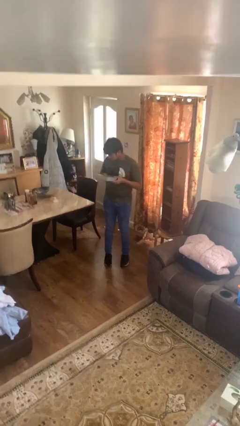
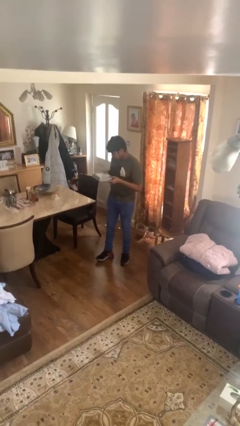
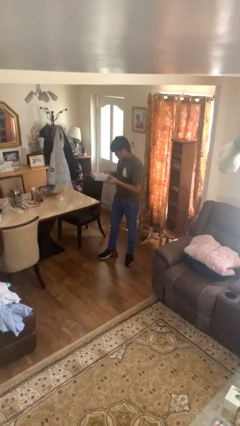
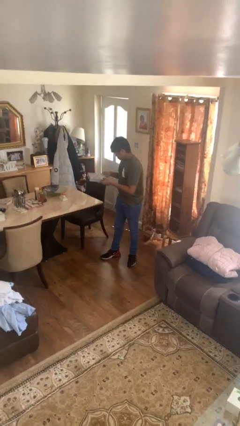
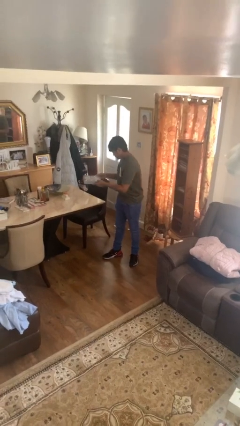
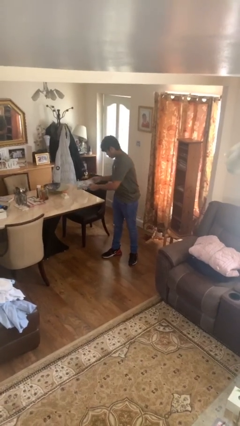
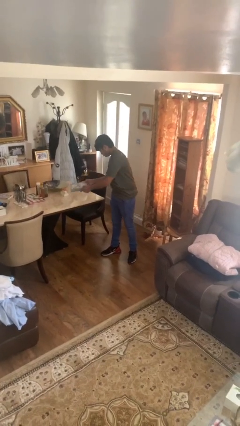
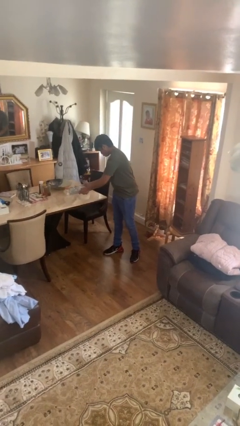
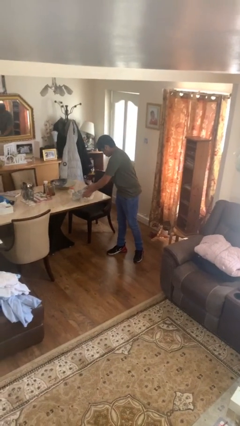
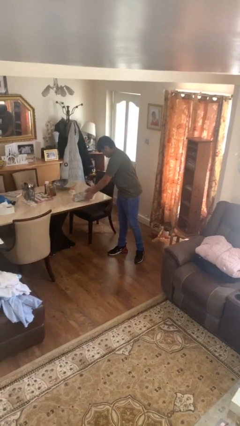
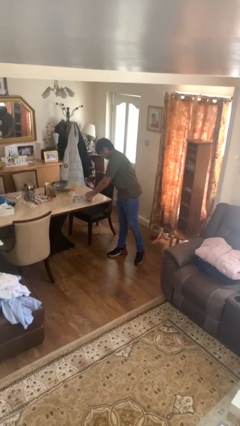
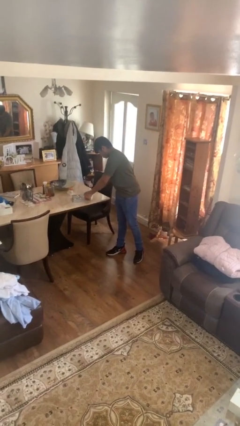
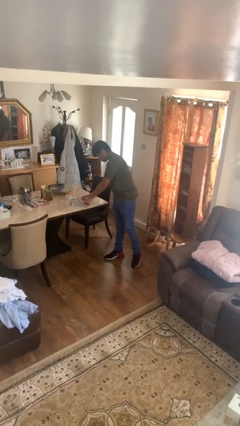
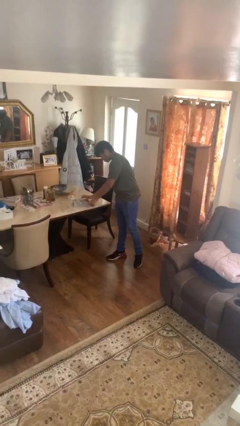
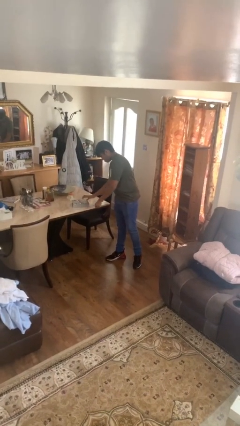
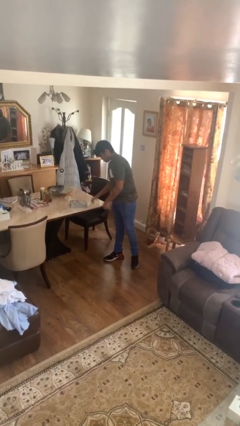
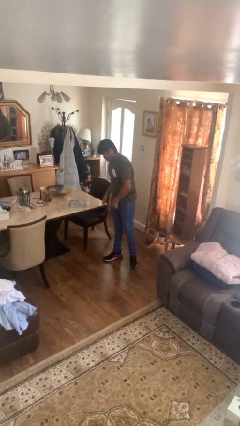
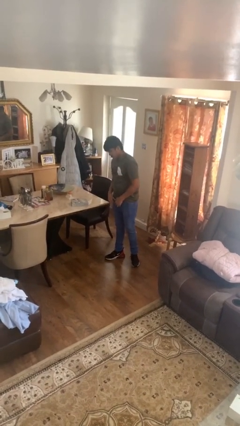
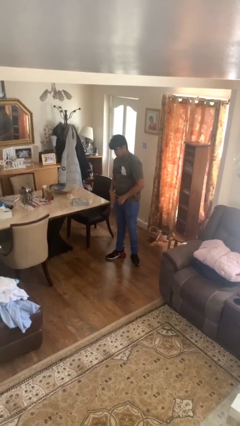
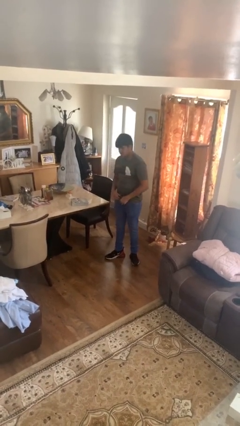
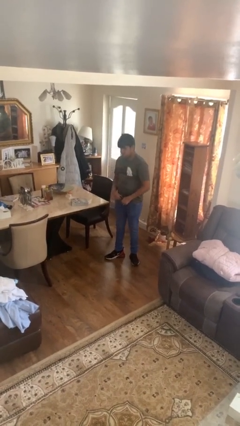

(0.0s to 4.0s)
person puts down object on table

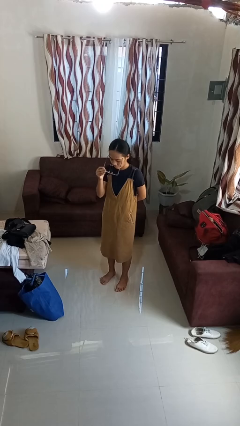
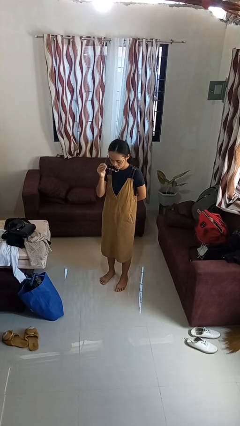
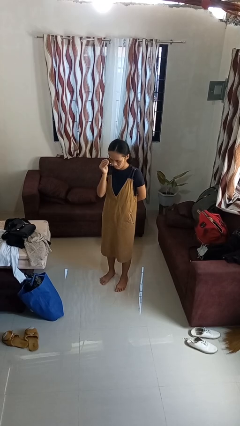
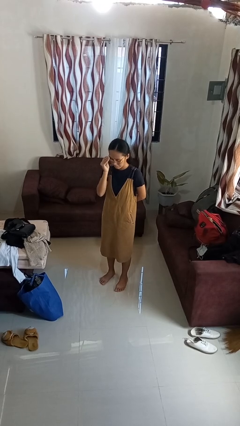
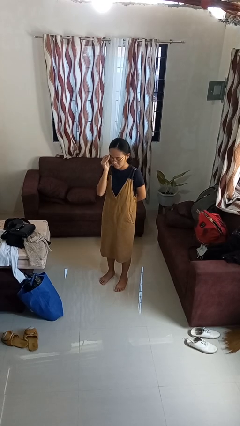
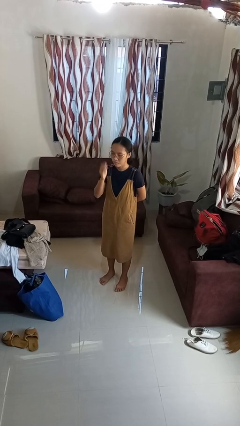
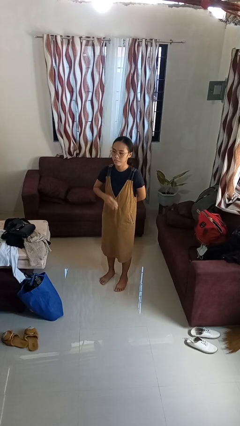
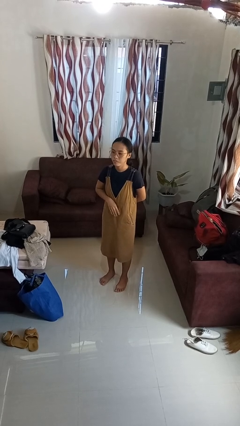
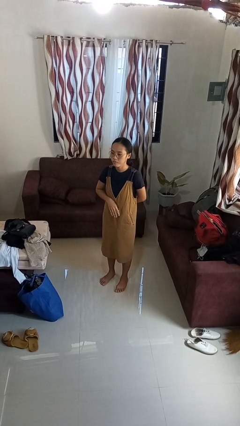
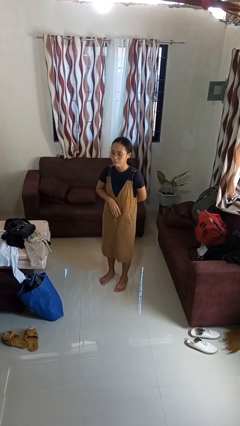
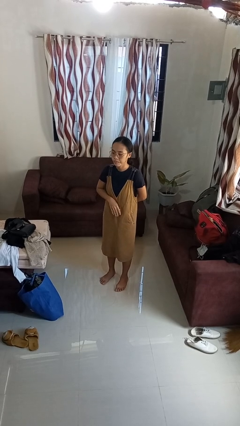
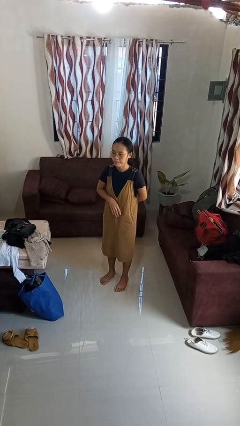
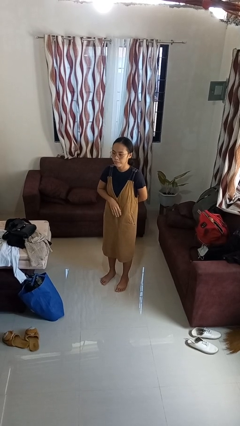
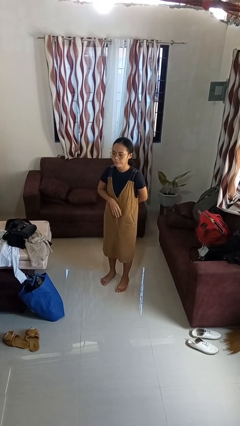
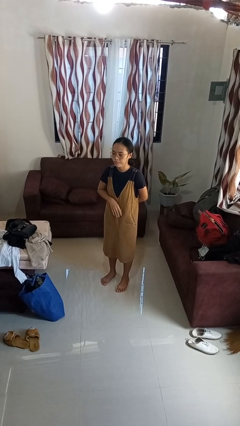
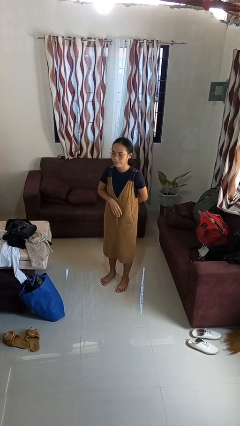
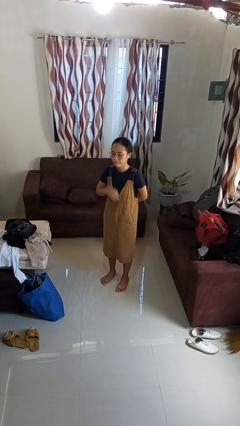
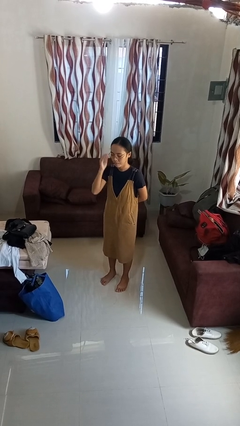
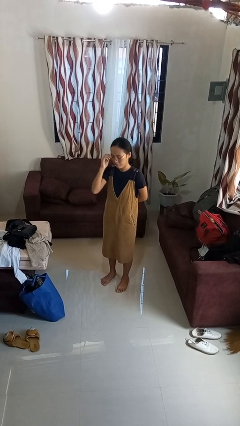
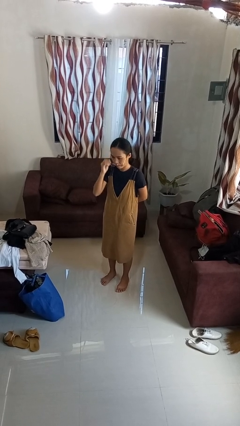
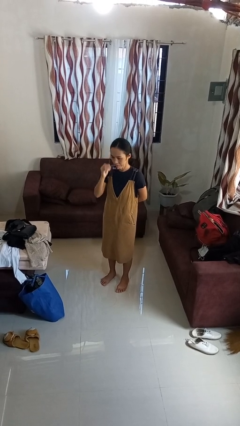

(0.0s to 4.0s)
person puts on glasses

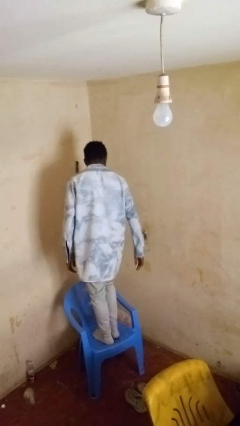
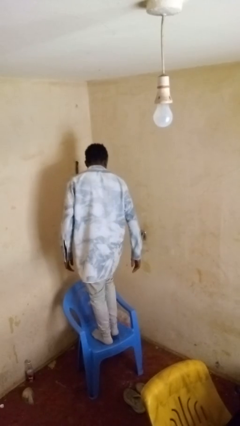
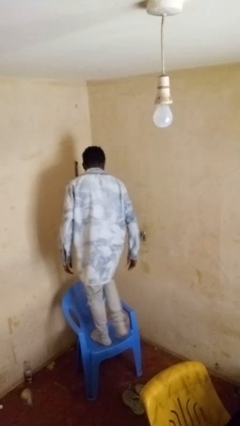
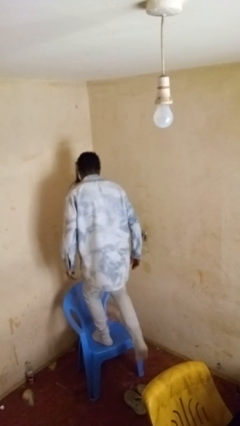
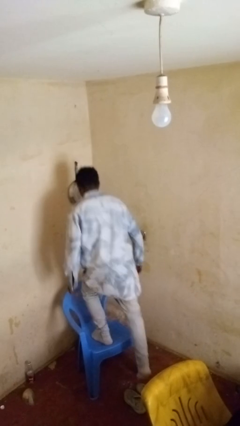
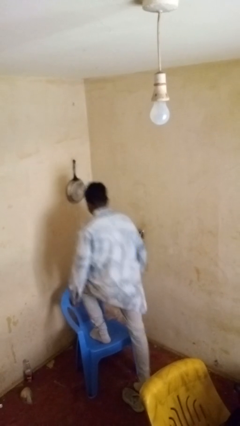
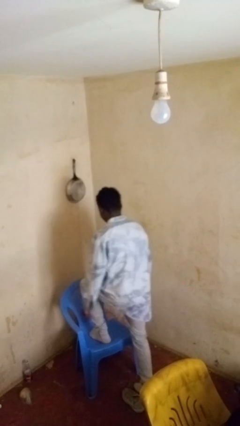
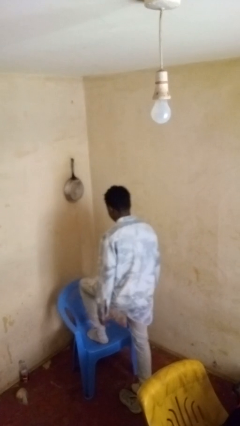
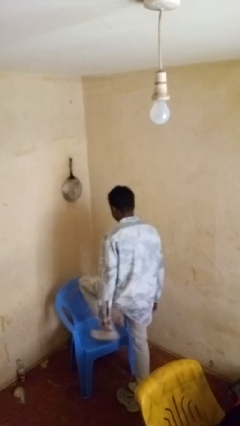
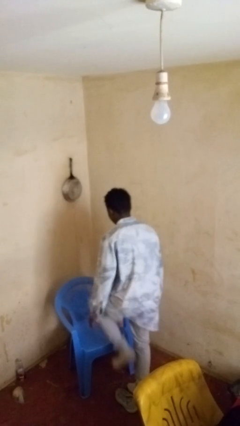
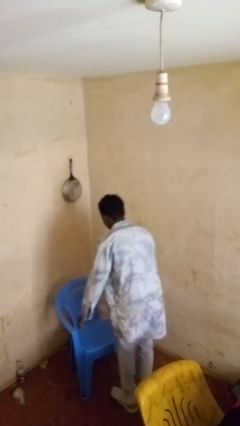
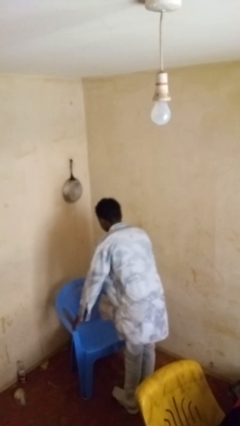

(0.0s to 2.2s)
person climbs off chair

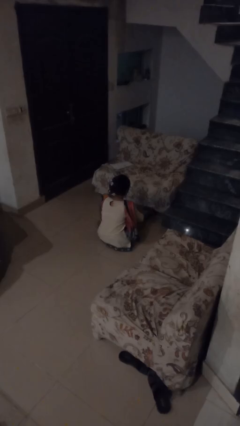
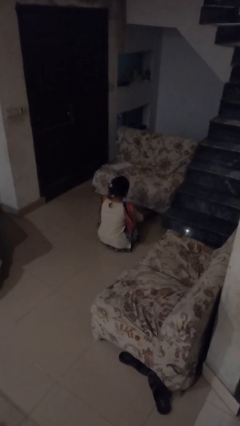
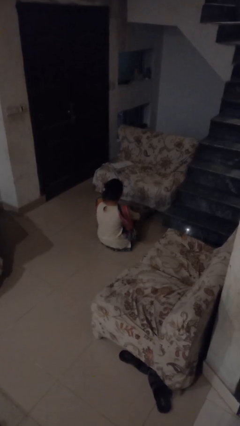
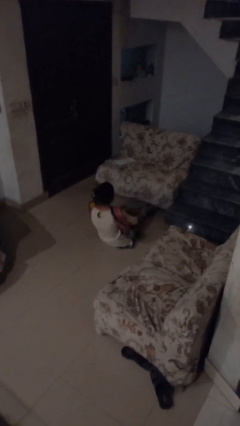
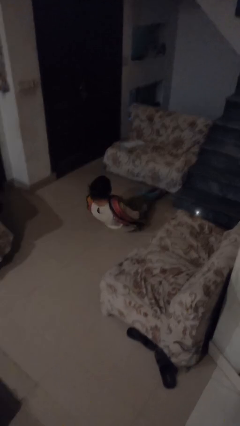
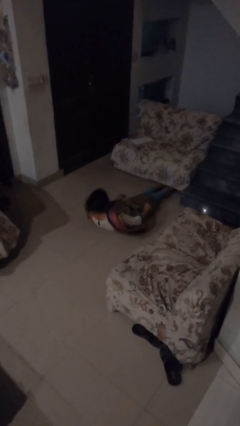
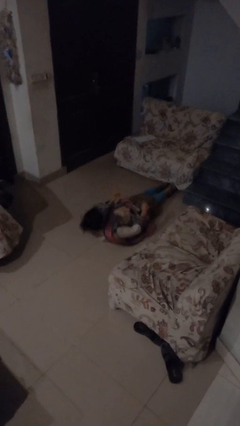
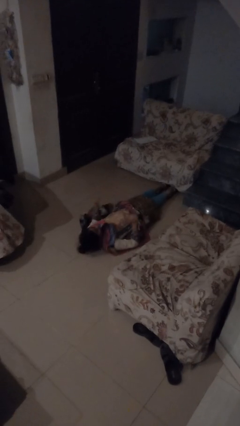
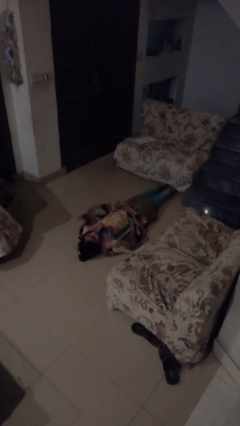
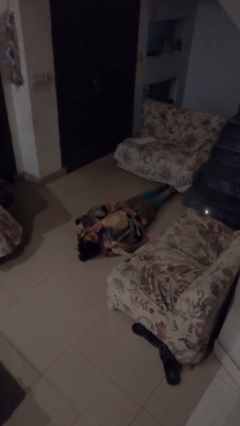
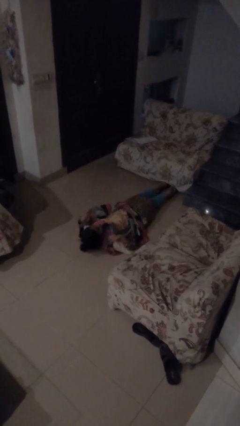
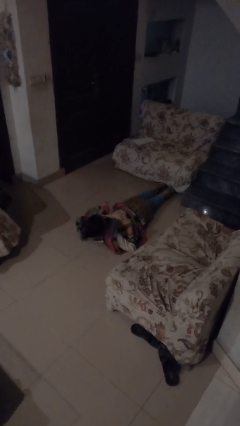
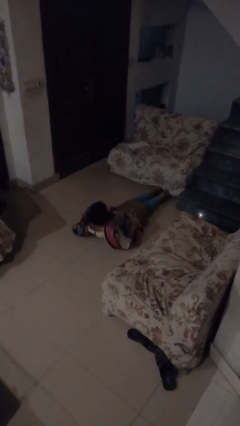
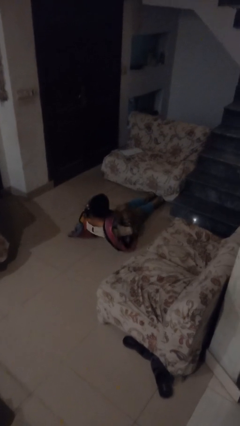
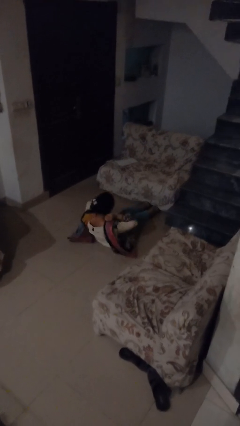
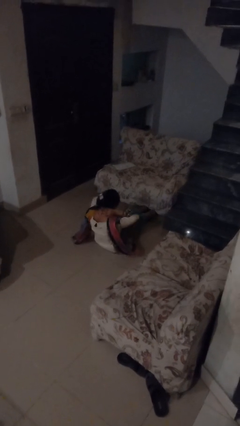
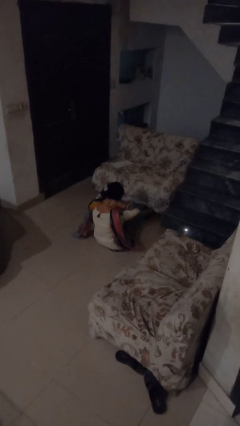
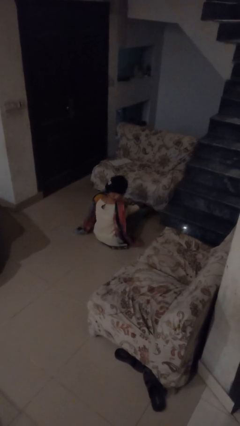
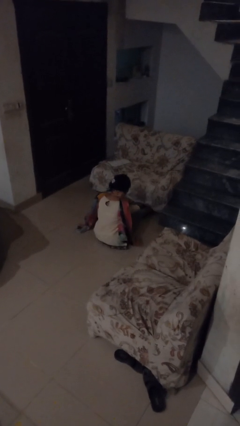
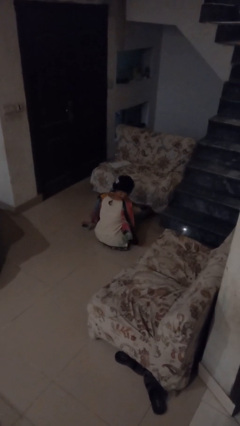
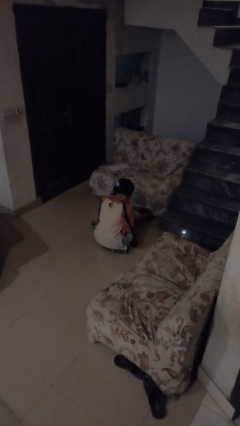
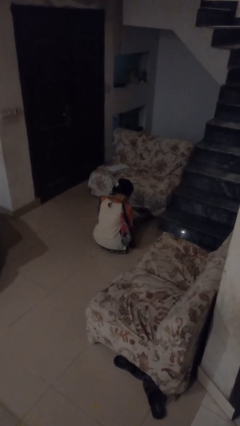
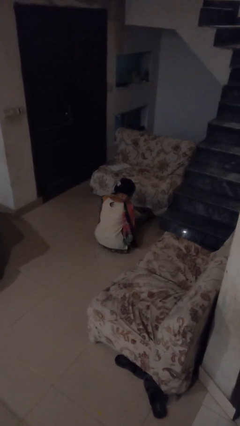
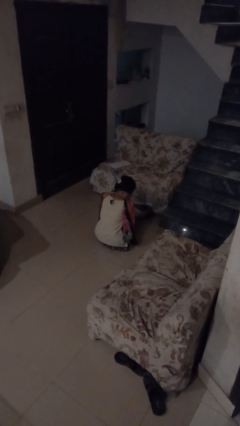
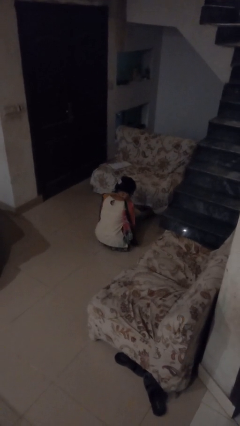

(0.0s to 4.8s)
person exercises with situp

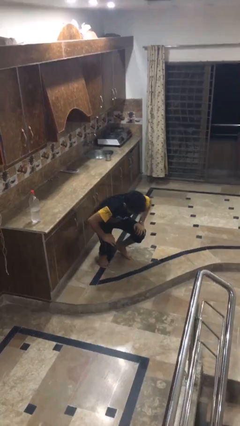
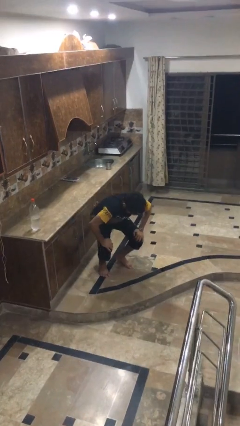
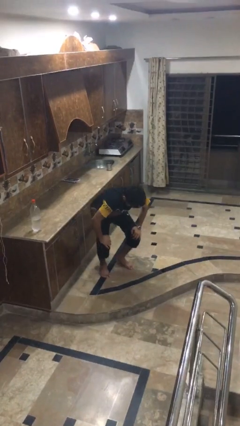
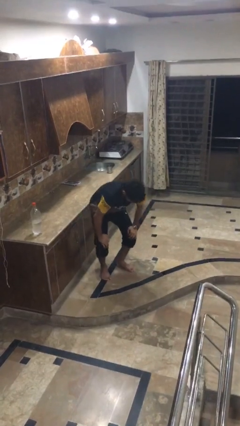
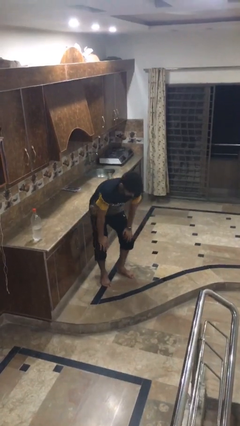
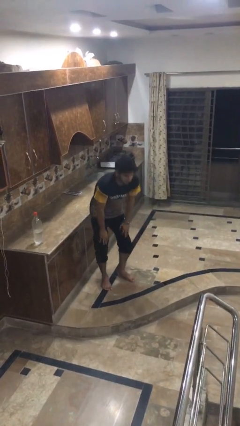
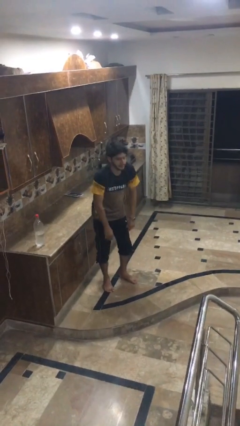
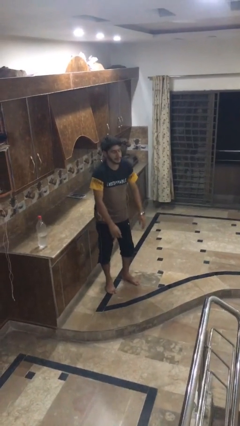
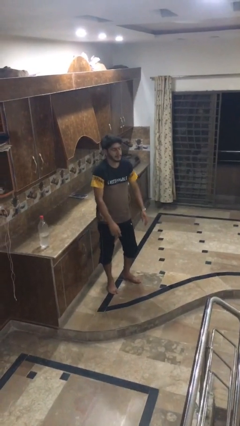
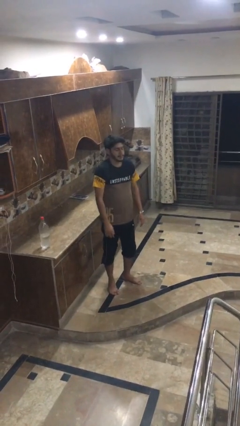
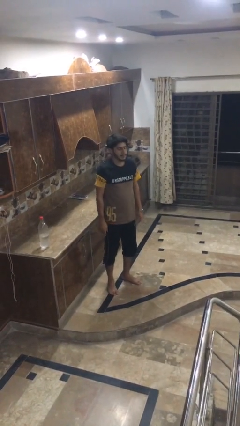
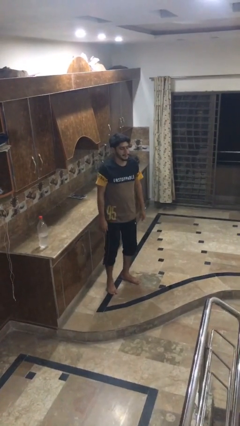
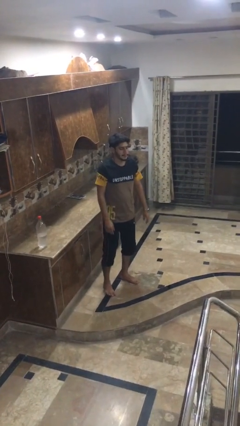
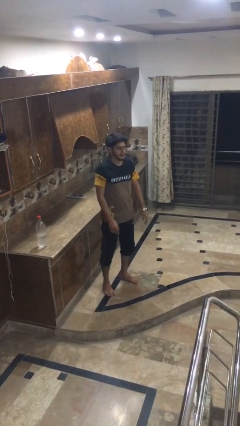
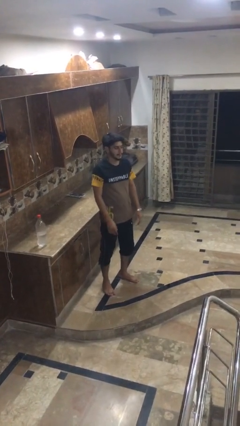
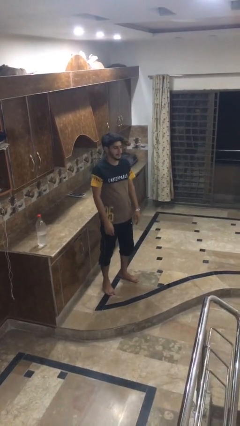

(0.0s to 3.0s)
person stands up

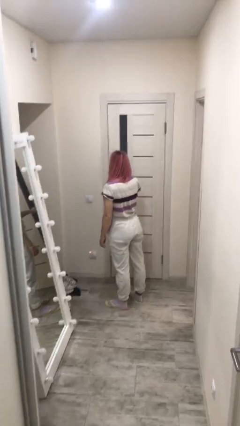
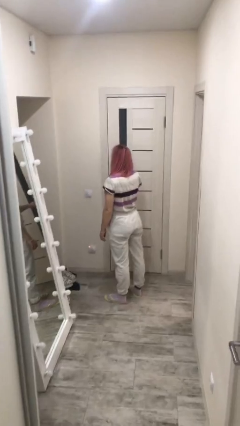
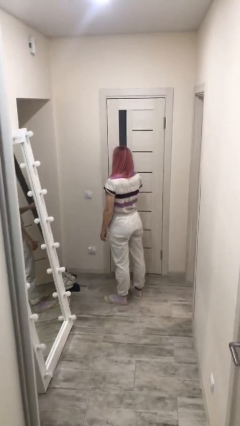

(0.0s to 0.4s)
person closes facility door
